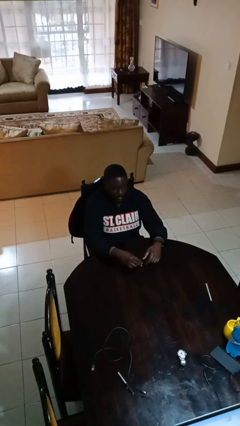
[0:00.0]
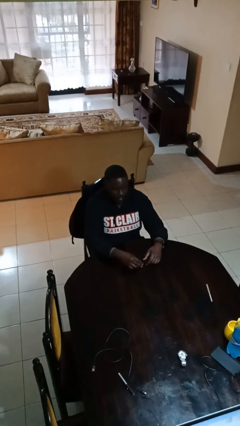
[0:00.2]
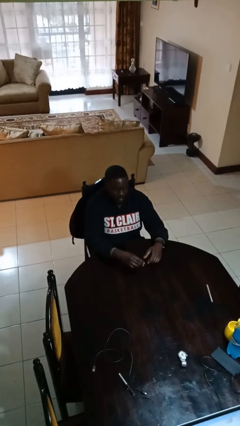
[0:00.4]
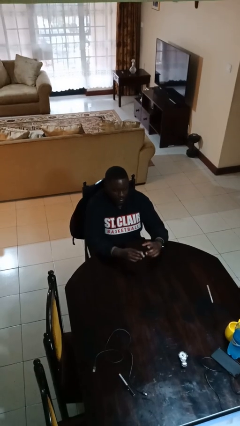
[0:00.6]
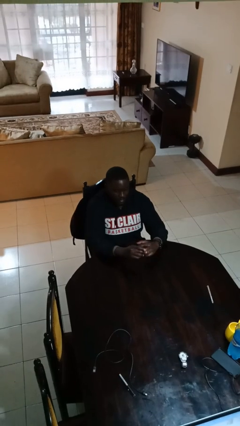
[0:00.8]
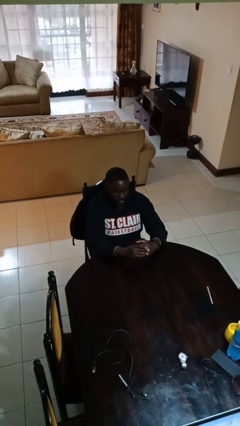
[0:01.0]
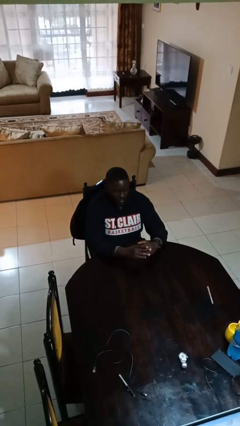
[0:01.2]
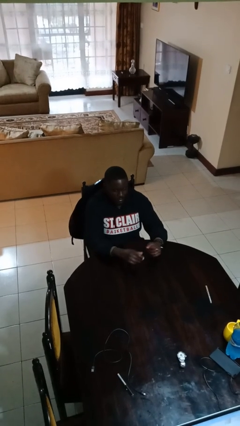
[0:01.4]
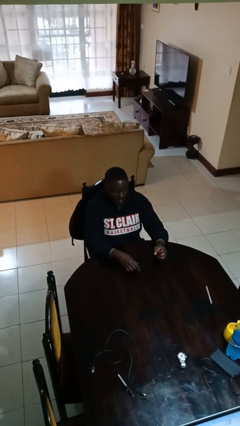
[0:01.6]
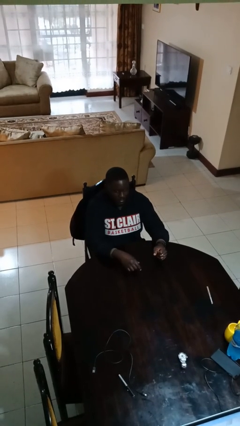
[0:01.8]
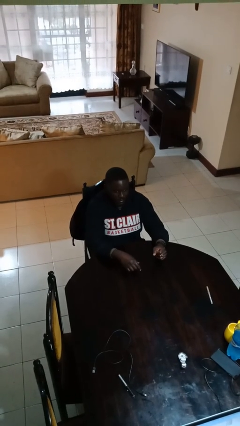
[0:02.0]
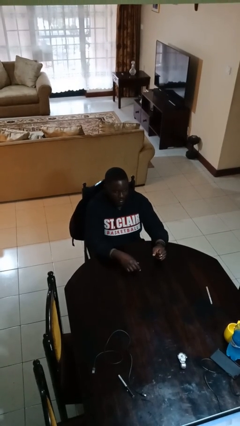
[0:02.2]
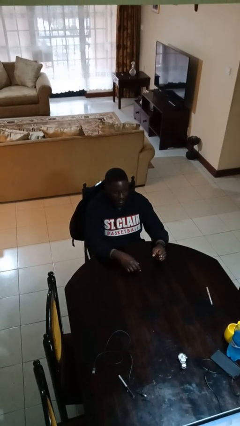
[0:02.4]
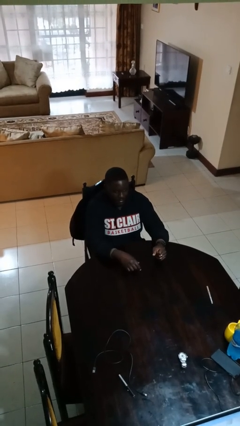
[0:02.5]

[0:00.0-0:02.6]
person puts on ring

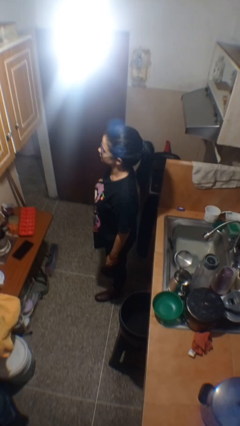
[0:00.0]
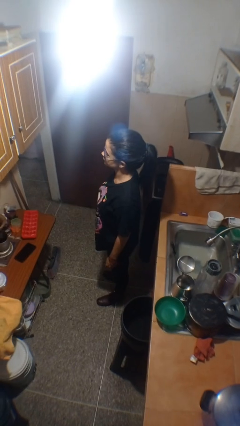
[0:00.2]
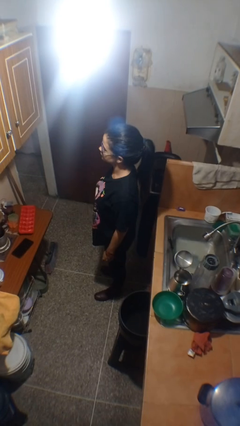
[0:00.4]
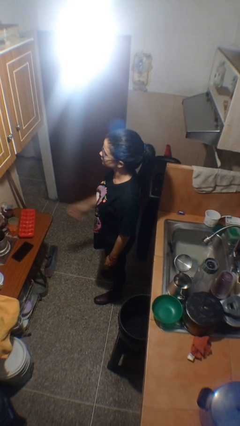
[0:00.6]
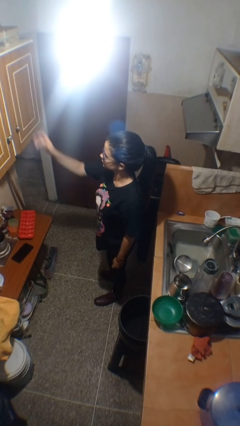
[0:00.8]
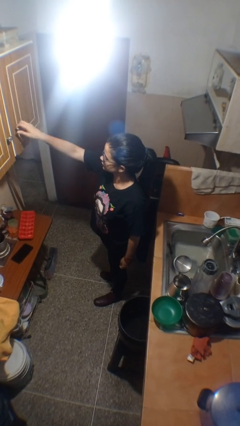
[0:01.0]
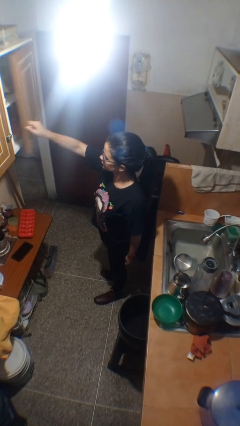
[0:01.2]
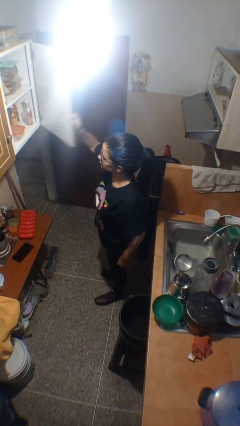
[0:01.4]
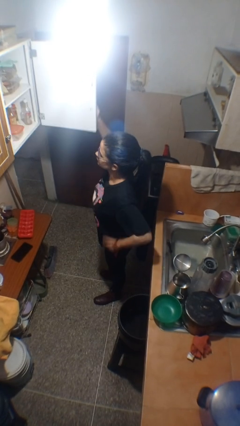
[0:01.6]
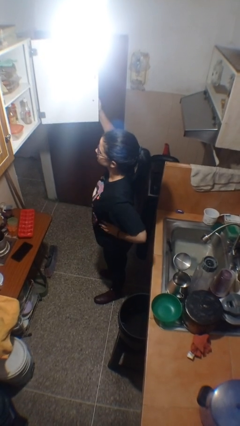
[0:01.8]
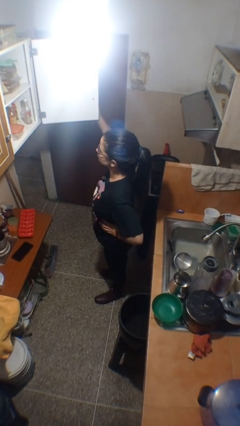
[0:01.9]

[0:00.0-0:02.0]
person opens cabinet

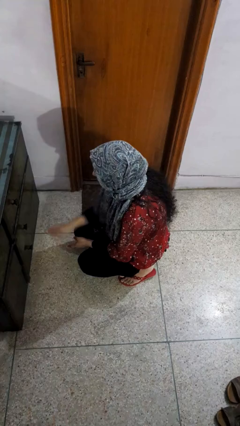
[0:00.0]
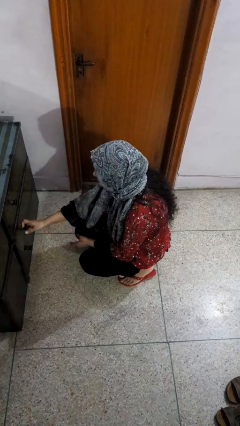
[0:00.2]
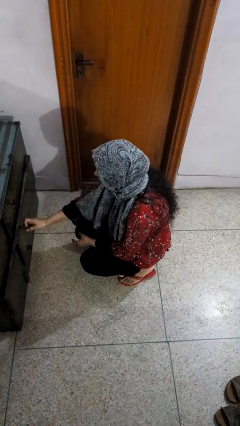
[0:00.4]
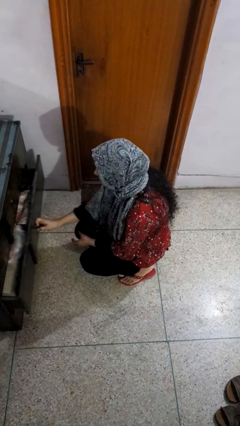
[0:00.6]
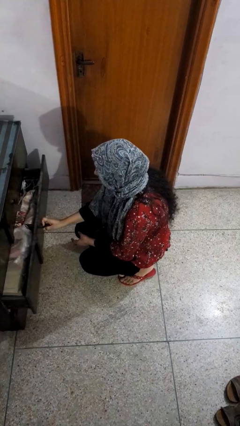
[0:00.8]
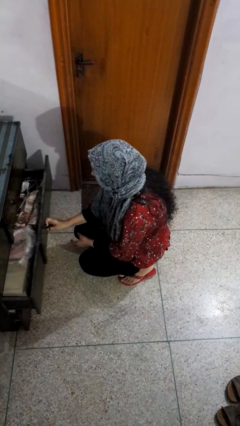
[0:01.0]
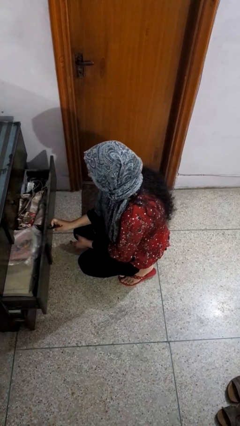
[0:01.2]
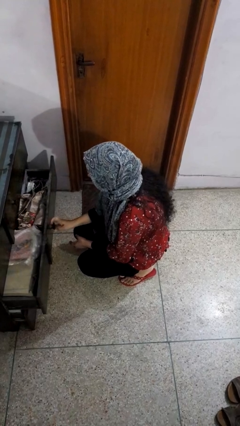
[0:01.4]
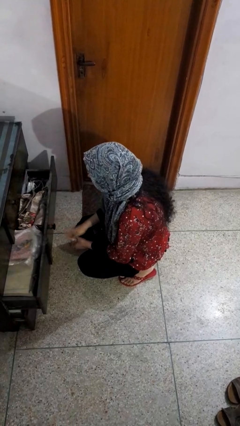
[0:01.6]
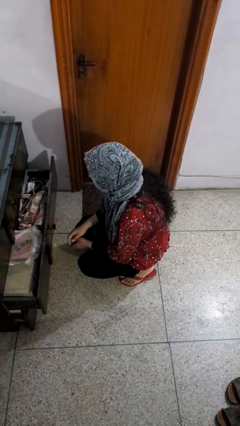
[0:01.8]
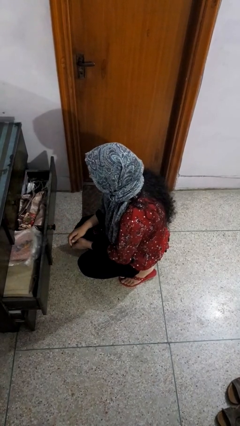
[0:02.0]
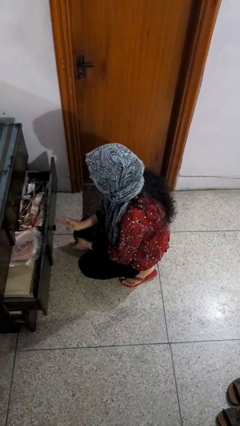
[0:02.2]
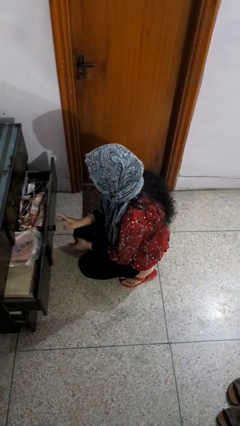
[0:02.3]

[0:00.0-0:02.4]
person opens dresser drawer

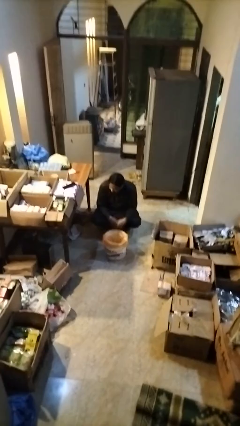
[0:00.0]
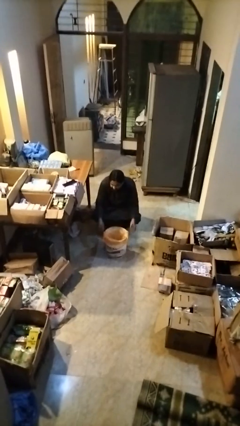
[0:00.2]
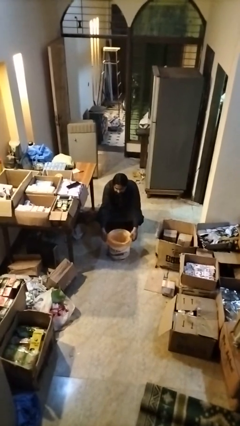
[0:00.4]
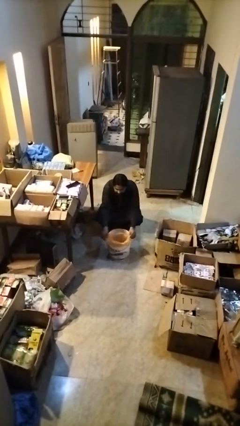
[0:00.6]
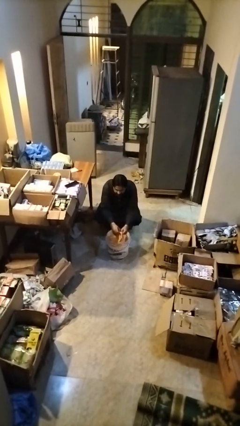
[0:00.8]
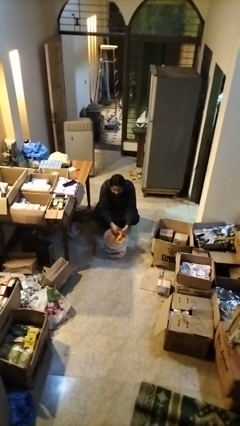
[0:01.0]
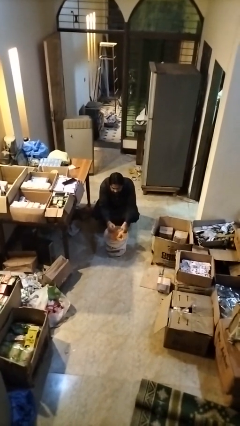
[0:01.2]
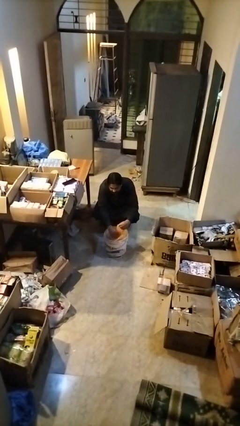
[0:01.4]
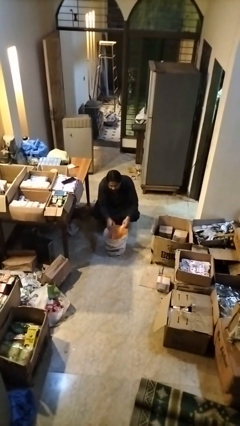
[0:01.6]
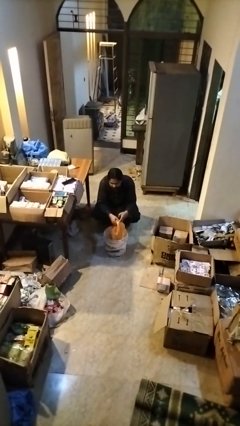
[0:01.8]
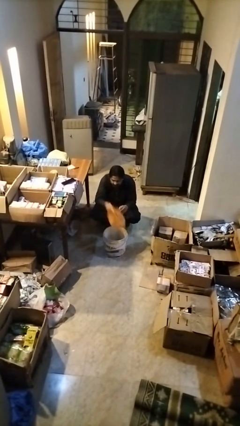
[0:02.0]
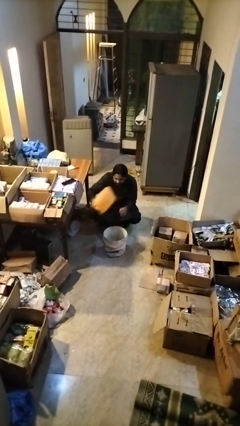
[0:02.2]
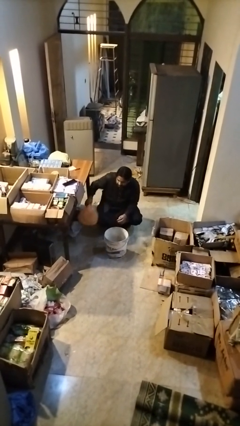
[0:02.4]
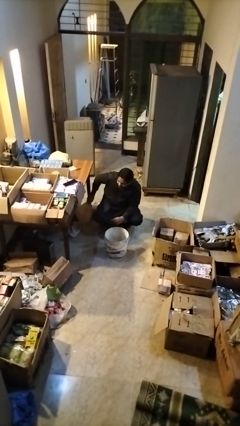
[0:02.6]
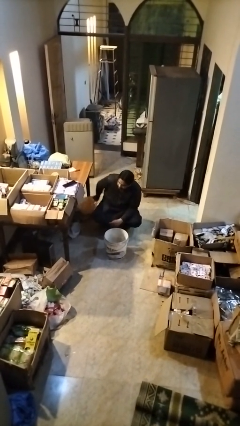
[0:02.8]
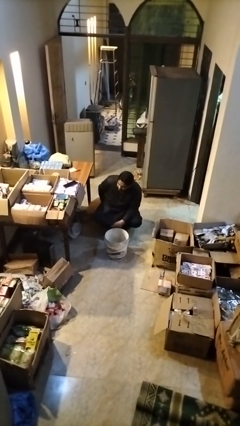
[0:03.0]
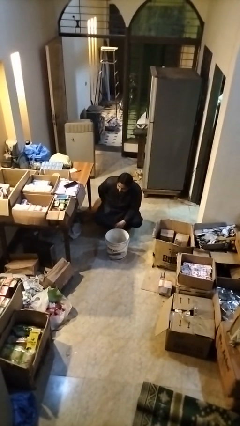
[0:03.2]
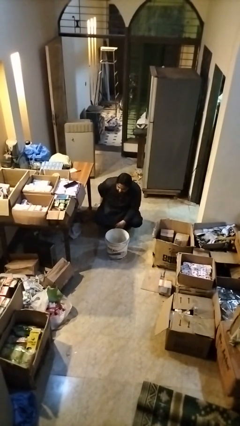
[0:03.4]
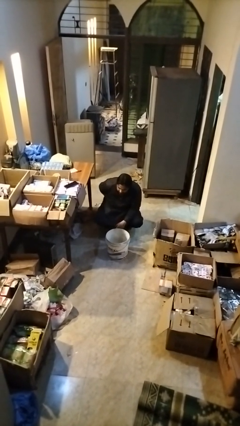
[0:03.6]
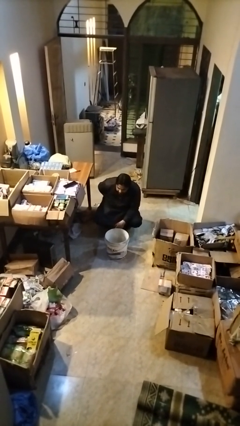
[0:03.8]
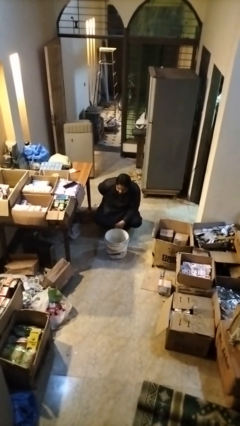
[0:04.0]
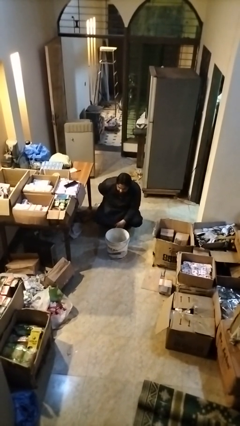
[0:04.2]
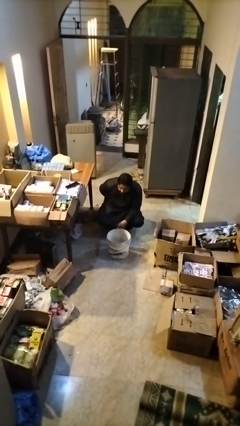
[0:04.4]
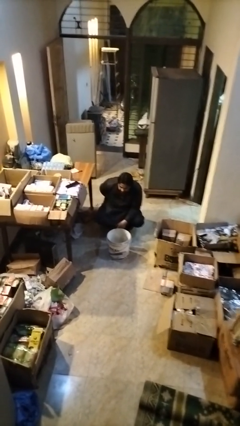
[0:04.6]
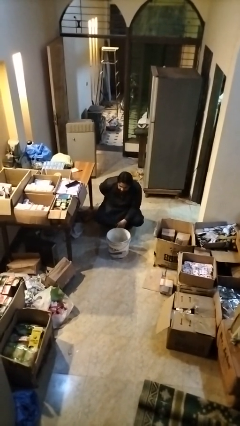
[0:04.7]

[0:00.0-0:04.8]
person removes trashbag from trashcan

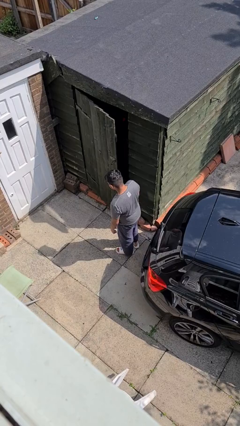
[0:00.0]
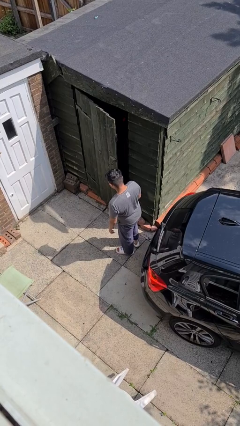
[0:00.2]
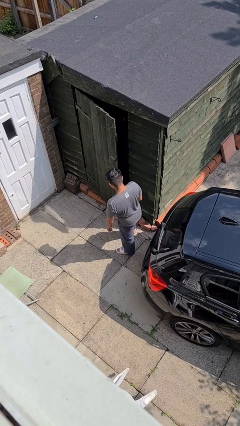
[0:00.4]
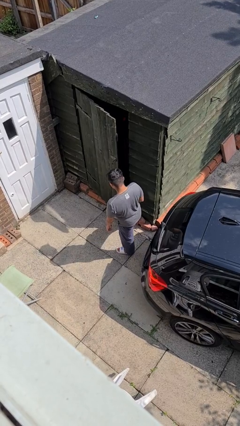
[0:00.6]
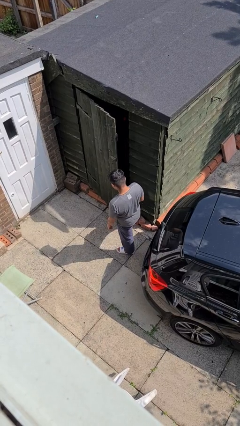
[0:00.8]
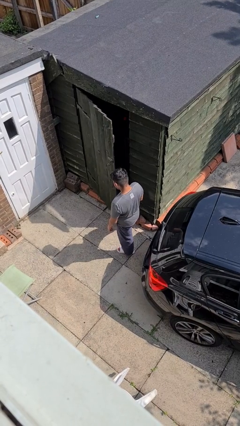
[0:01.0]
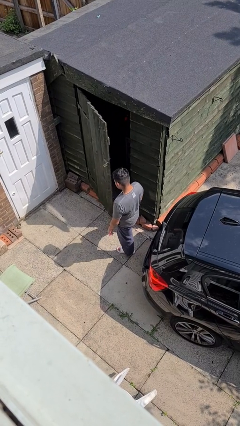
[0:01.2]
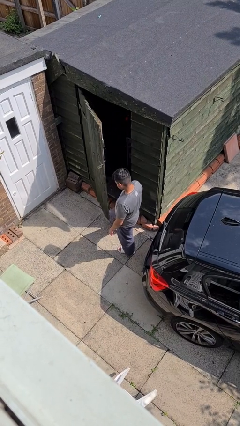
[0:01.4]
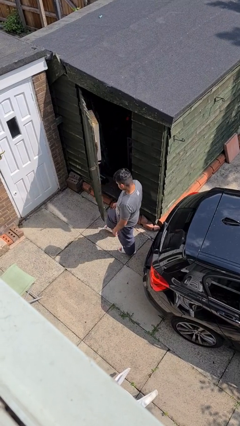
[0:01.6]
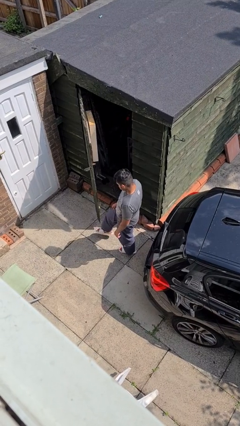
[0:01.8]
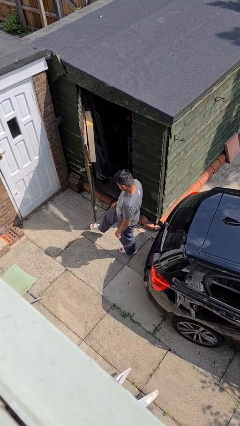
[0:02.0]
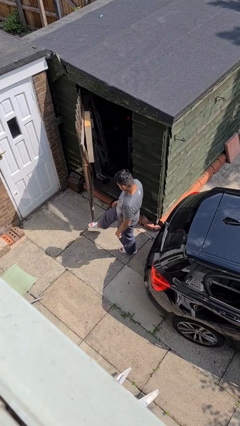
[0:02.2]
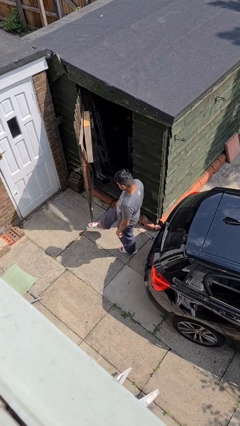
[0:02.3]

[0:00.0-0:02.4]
person opens facility door

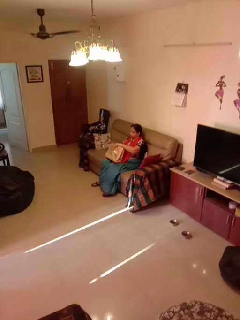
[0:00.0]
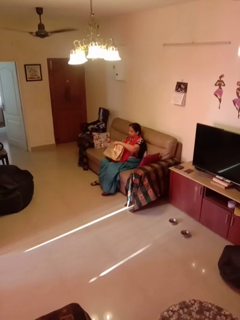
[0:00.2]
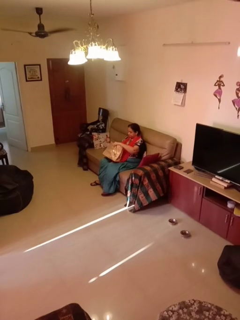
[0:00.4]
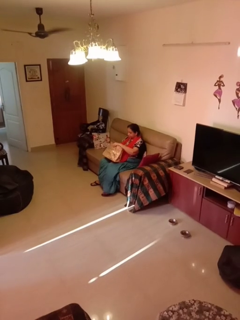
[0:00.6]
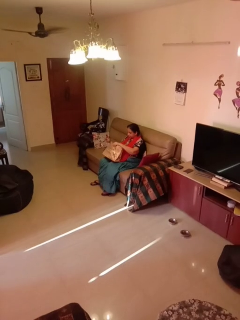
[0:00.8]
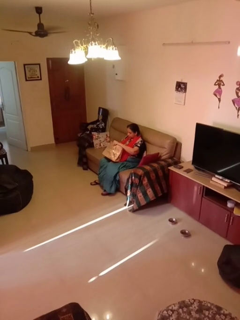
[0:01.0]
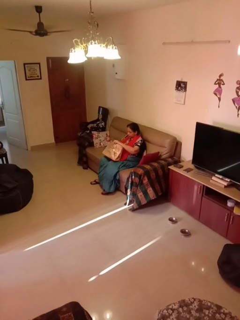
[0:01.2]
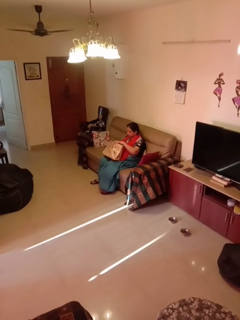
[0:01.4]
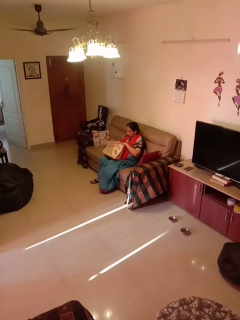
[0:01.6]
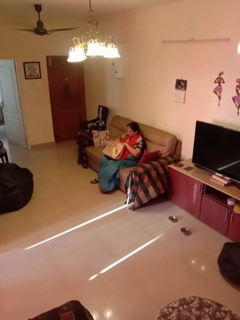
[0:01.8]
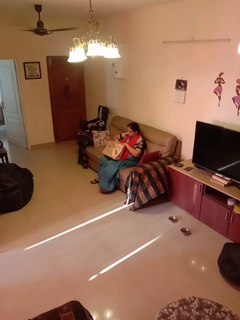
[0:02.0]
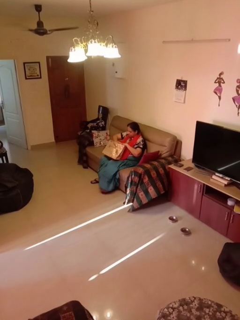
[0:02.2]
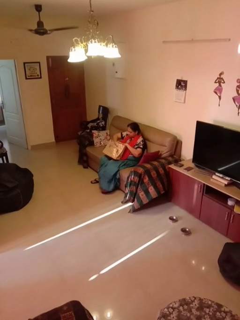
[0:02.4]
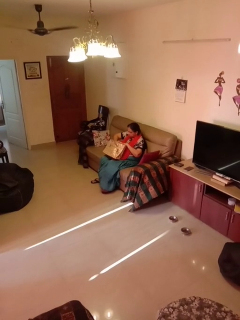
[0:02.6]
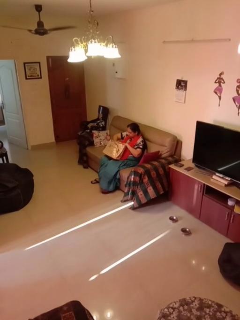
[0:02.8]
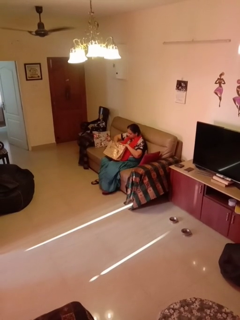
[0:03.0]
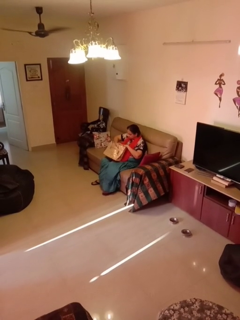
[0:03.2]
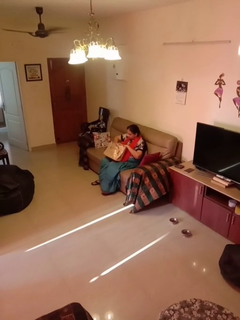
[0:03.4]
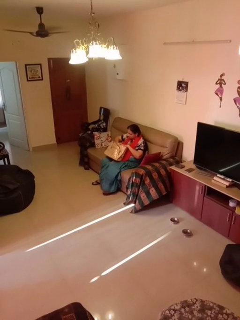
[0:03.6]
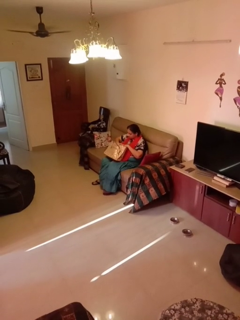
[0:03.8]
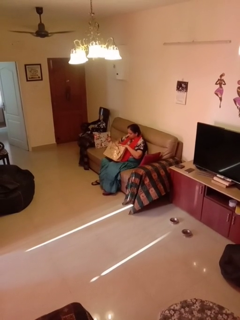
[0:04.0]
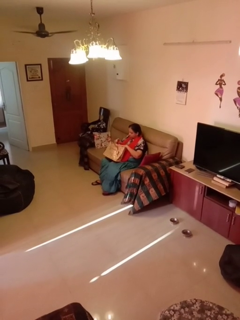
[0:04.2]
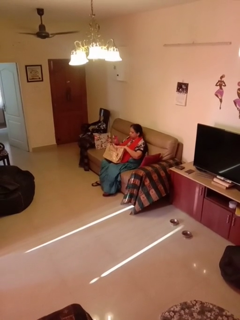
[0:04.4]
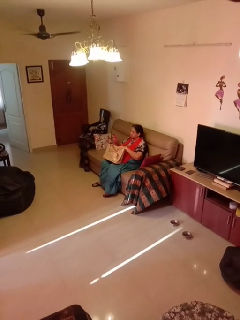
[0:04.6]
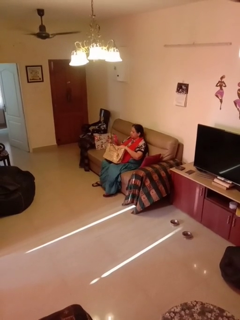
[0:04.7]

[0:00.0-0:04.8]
person searches in purse
